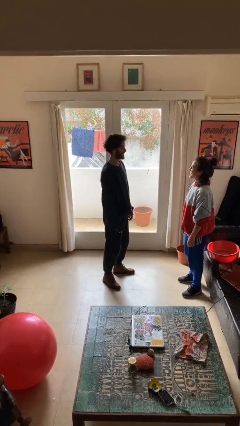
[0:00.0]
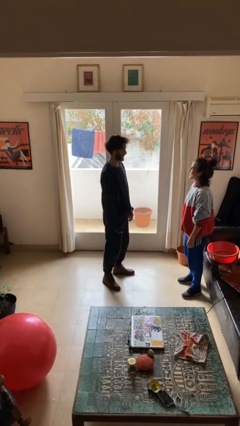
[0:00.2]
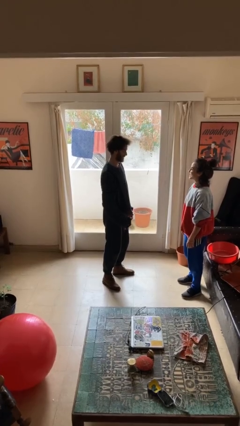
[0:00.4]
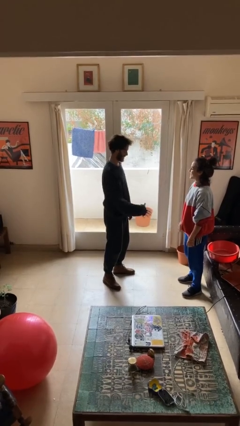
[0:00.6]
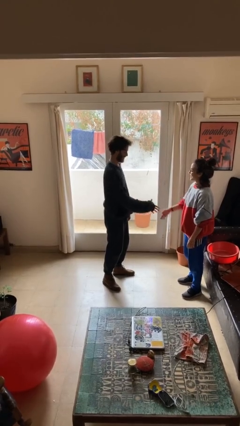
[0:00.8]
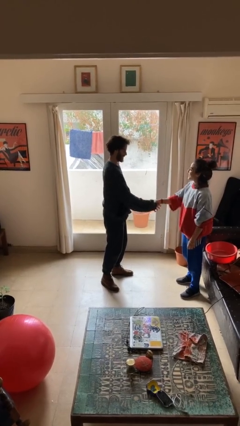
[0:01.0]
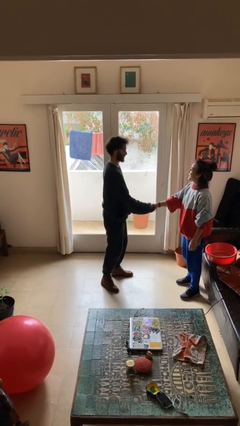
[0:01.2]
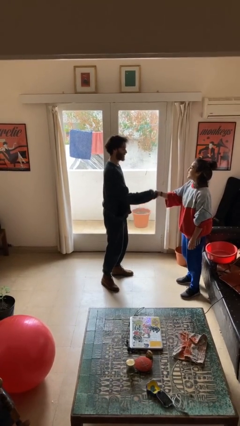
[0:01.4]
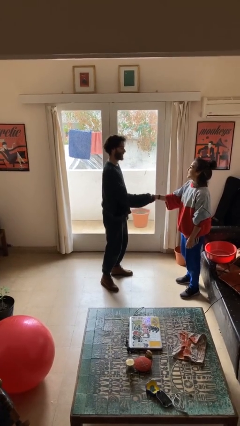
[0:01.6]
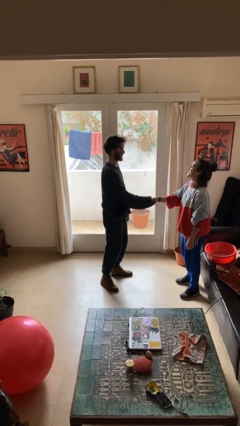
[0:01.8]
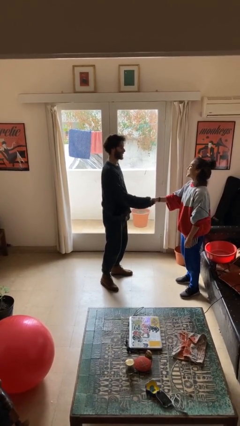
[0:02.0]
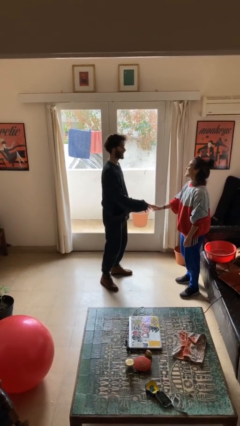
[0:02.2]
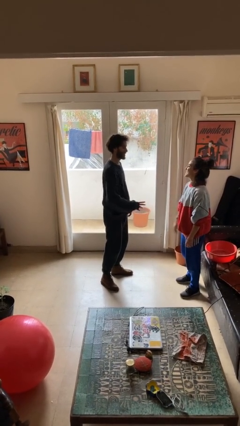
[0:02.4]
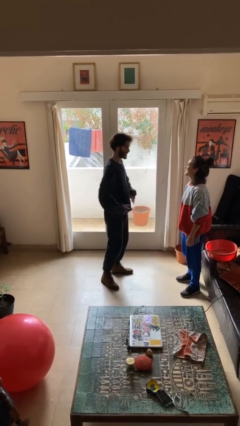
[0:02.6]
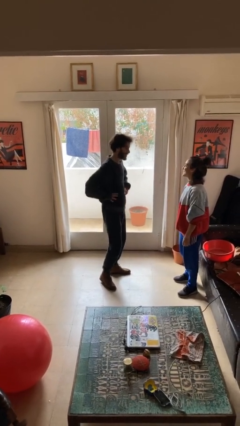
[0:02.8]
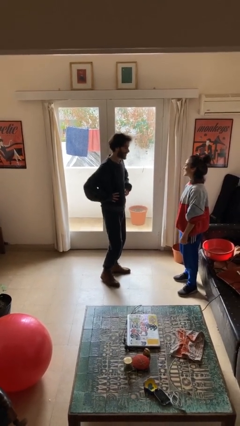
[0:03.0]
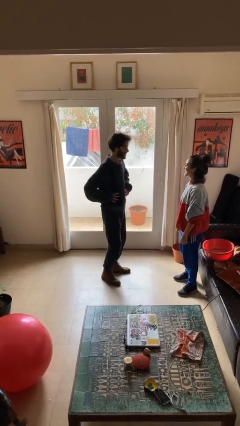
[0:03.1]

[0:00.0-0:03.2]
person shakes hand

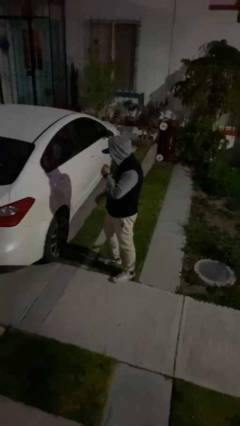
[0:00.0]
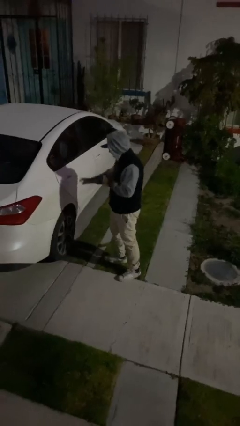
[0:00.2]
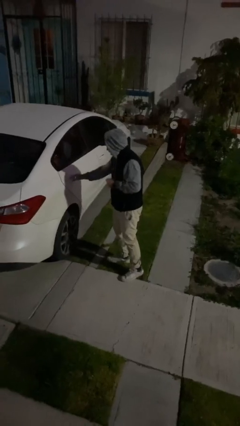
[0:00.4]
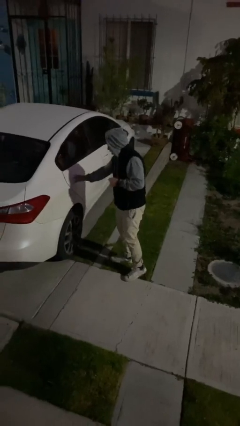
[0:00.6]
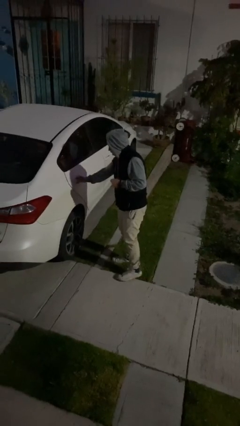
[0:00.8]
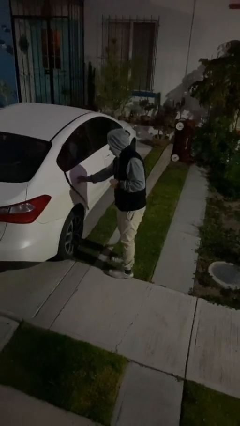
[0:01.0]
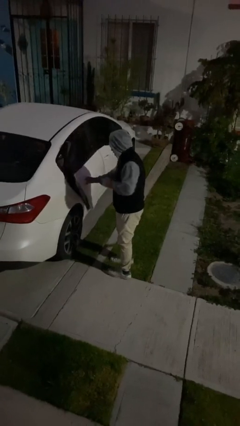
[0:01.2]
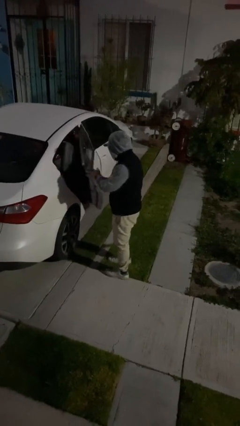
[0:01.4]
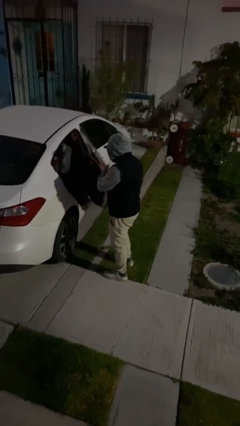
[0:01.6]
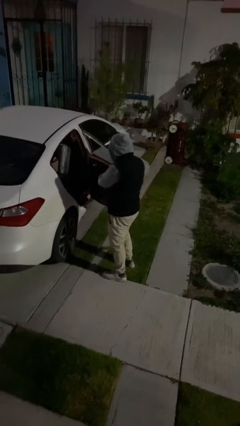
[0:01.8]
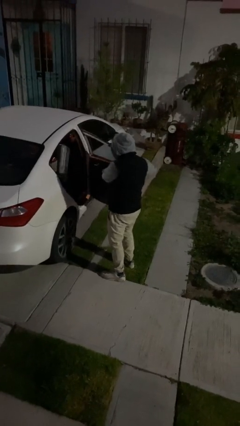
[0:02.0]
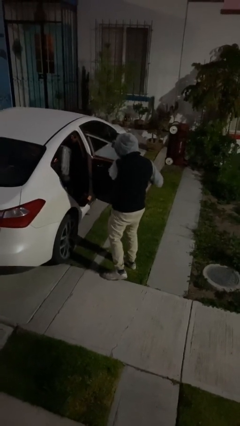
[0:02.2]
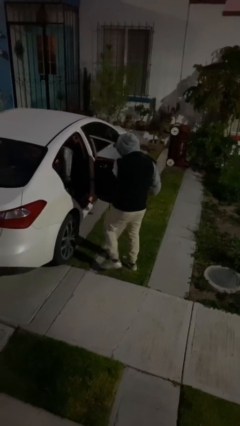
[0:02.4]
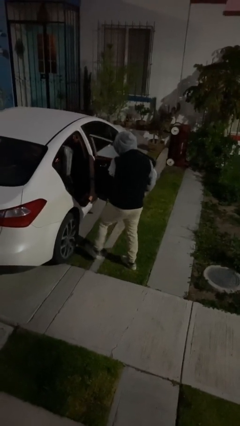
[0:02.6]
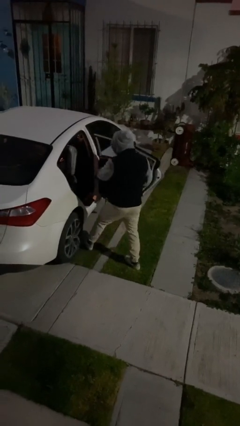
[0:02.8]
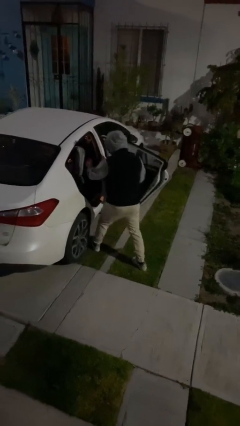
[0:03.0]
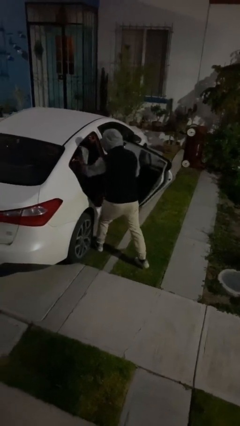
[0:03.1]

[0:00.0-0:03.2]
person opens car door

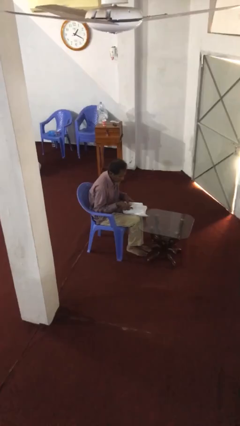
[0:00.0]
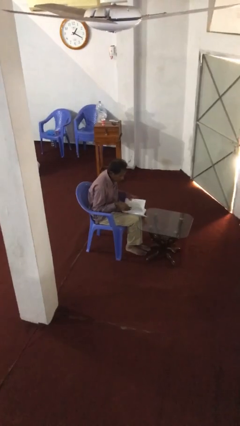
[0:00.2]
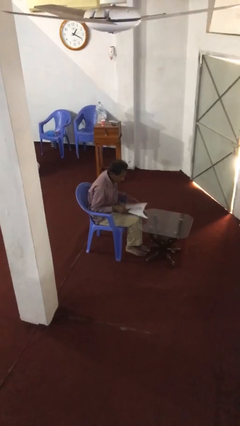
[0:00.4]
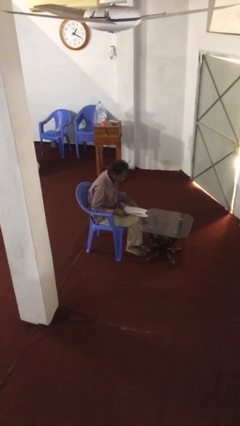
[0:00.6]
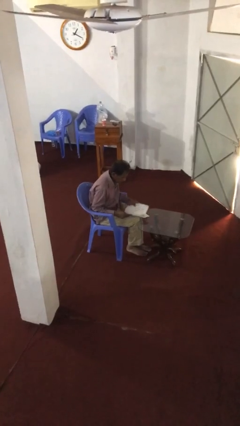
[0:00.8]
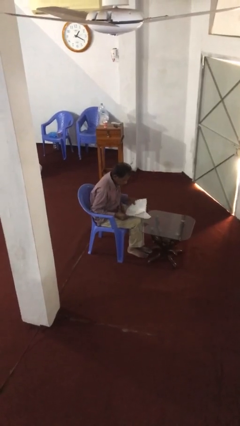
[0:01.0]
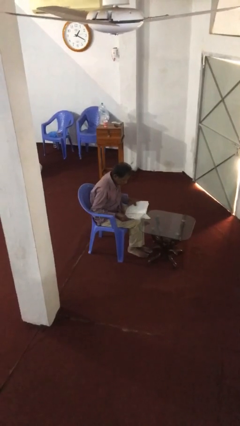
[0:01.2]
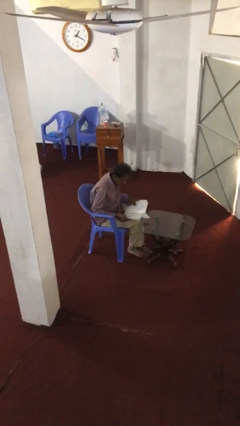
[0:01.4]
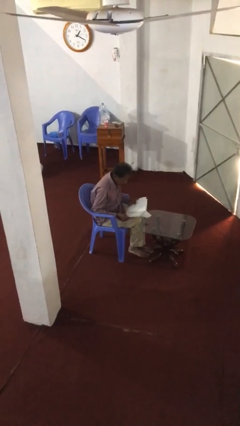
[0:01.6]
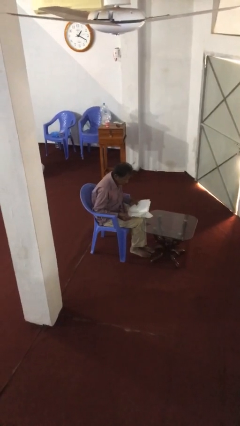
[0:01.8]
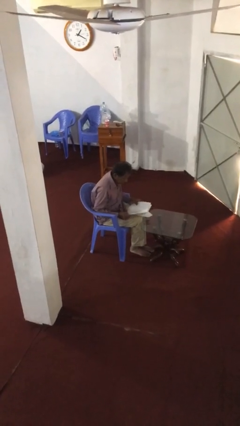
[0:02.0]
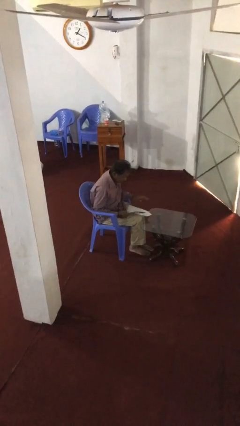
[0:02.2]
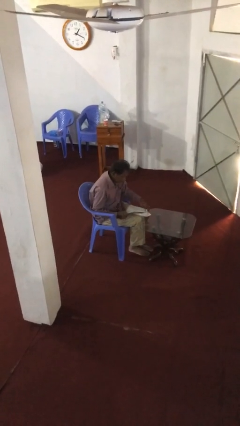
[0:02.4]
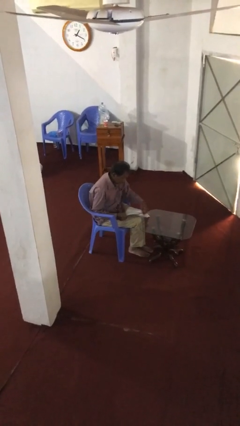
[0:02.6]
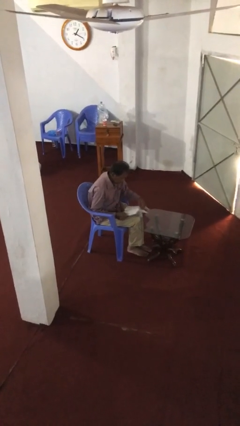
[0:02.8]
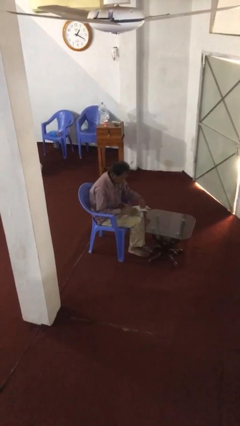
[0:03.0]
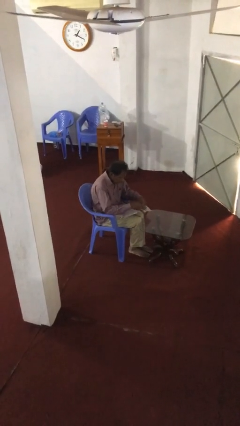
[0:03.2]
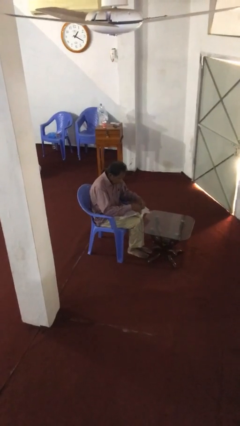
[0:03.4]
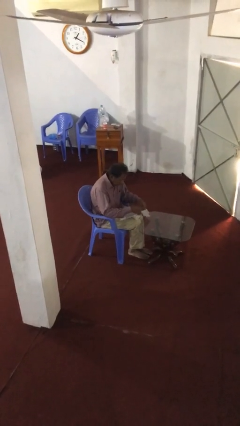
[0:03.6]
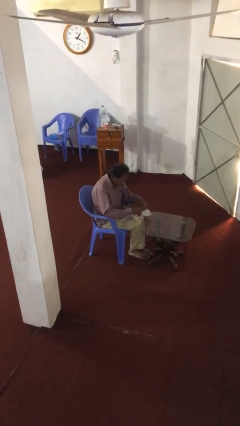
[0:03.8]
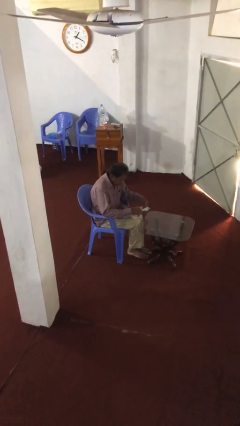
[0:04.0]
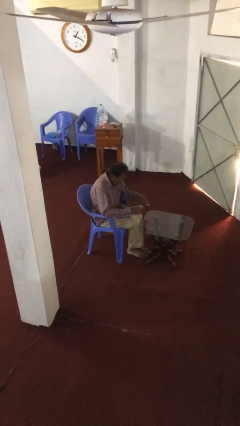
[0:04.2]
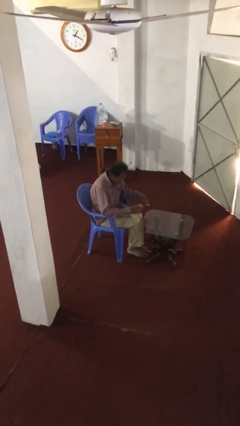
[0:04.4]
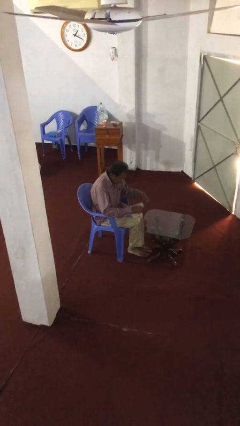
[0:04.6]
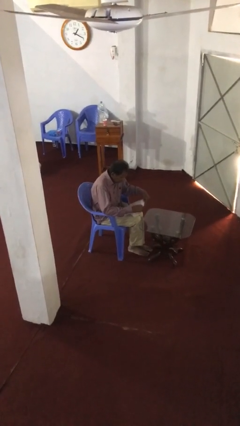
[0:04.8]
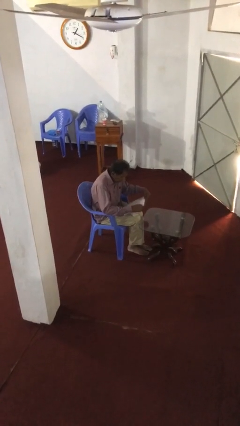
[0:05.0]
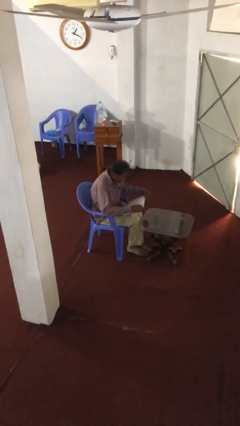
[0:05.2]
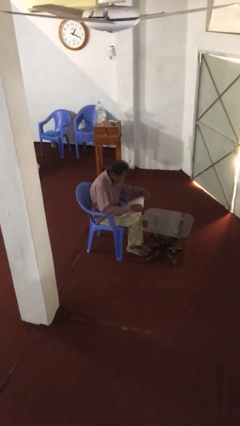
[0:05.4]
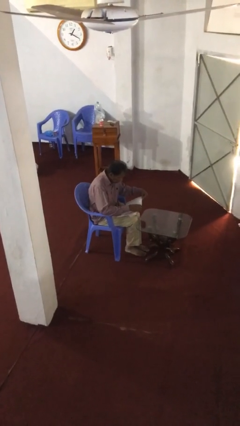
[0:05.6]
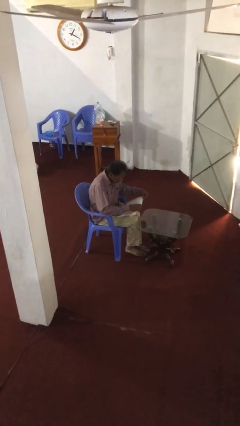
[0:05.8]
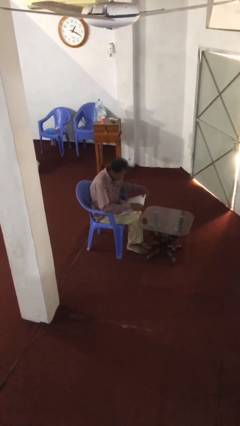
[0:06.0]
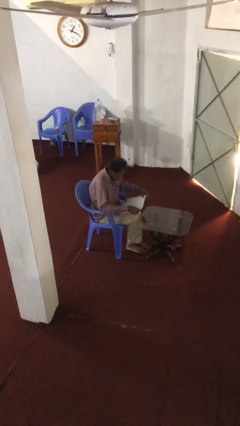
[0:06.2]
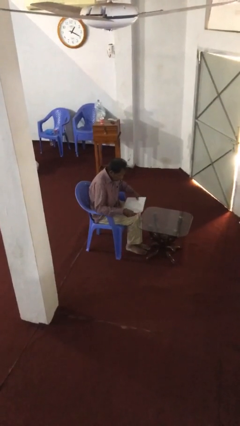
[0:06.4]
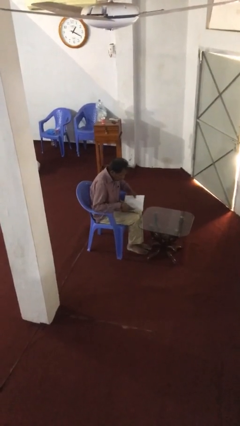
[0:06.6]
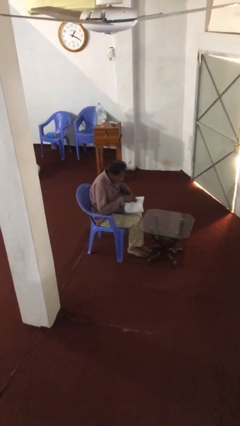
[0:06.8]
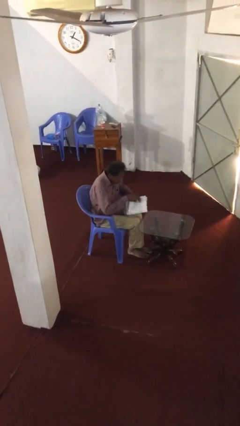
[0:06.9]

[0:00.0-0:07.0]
person reads document

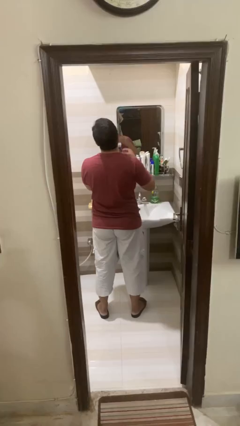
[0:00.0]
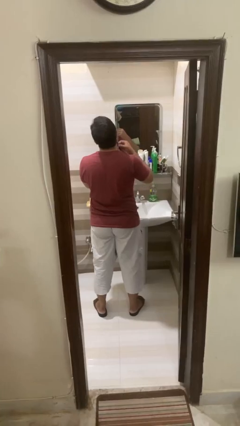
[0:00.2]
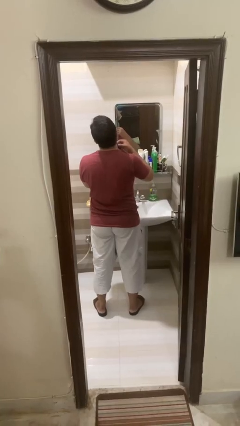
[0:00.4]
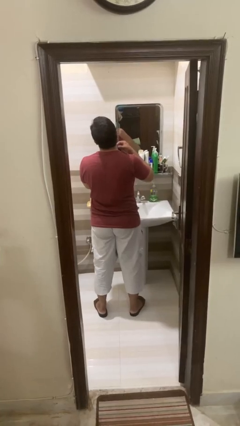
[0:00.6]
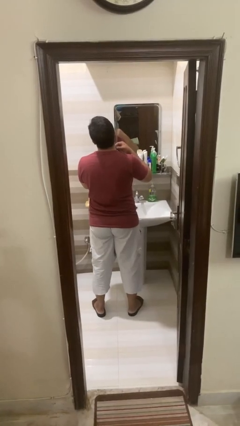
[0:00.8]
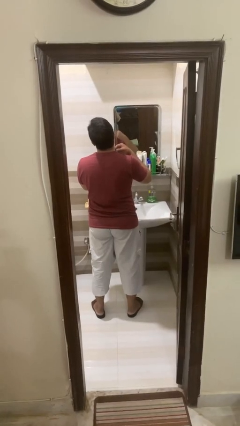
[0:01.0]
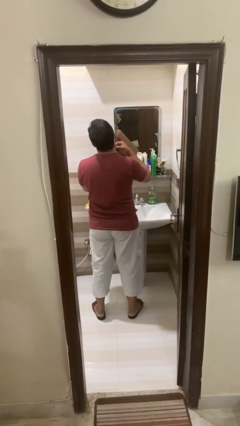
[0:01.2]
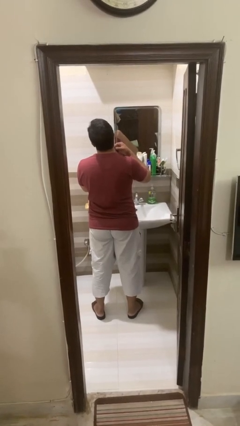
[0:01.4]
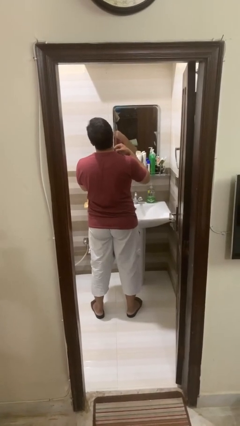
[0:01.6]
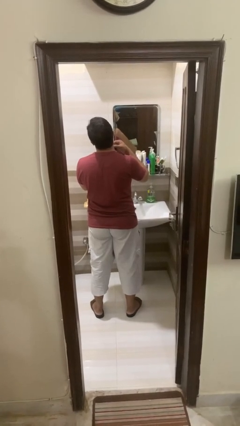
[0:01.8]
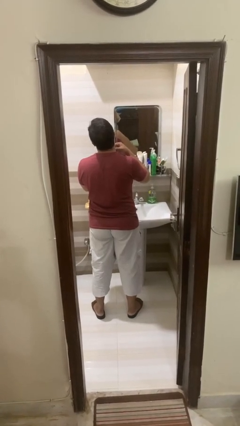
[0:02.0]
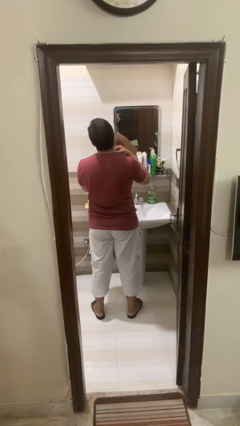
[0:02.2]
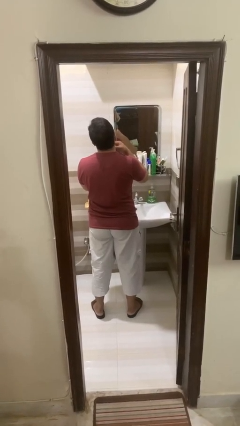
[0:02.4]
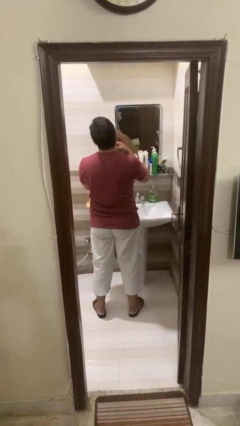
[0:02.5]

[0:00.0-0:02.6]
person shaves face

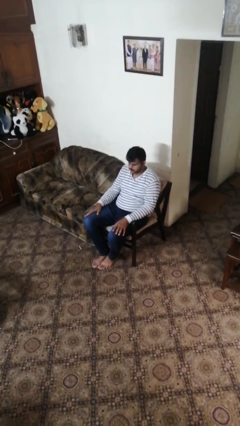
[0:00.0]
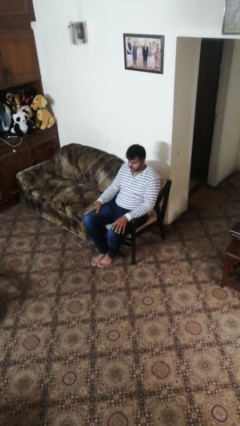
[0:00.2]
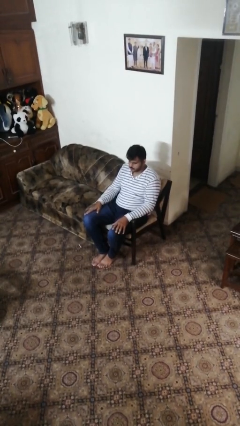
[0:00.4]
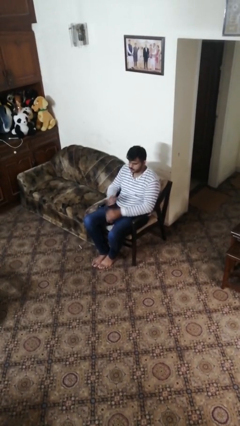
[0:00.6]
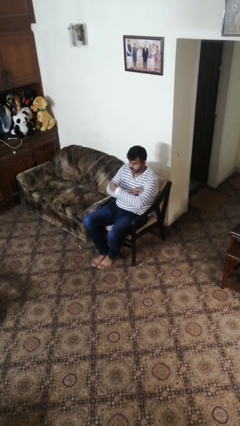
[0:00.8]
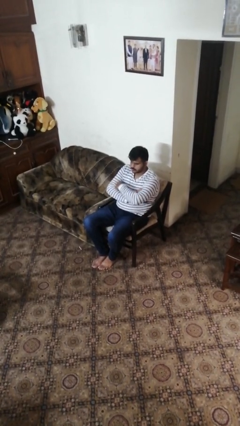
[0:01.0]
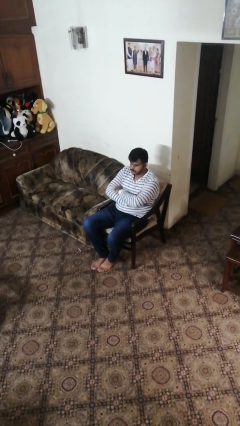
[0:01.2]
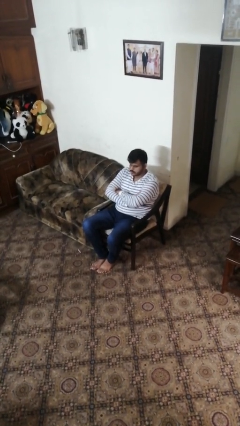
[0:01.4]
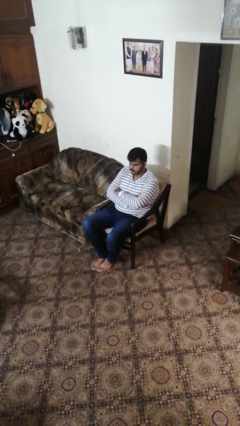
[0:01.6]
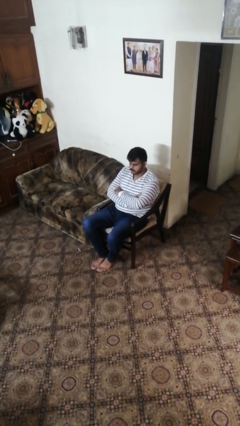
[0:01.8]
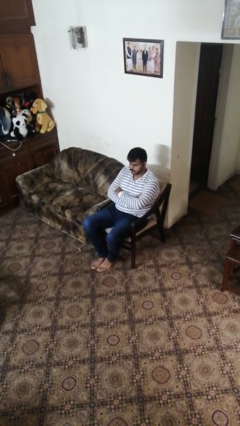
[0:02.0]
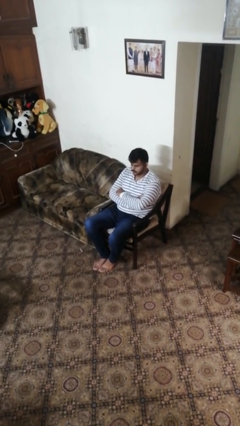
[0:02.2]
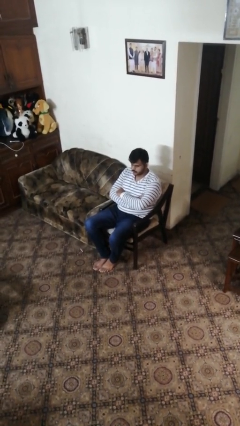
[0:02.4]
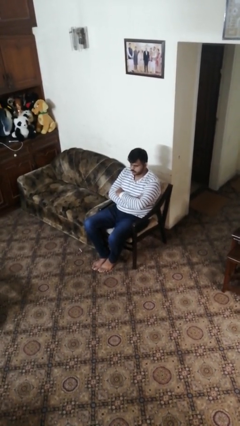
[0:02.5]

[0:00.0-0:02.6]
person crosses arms
